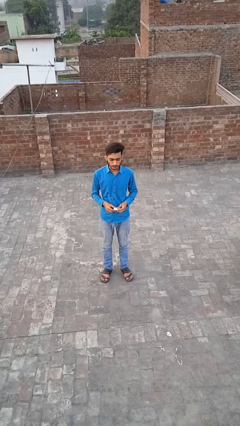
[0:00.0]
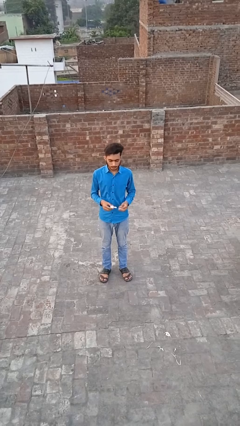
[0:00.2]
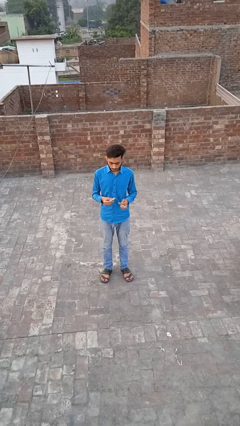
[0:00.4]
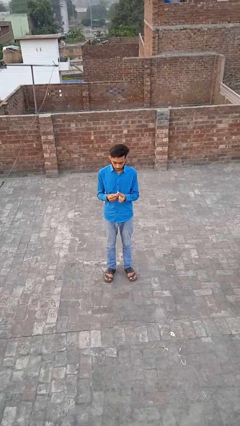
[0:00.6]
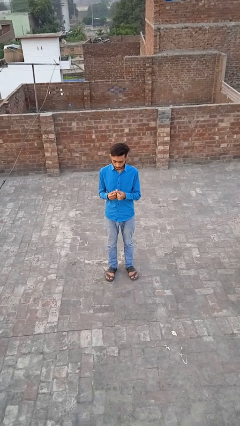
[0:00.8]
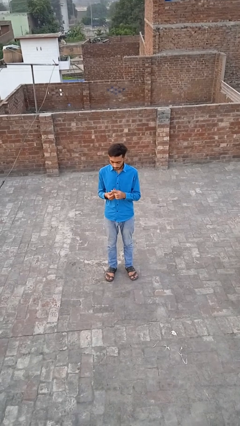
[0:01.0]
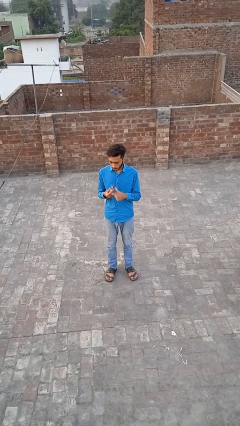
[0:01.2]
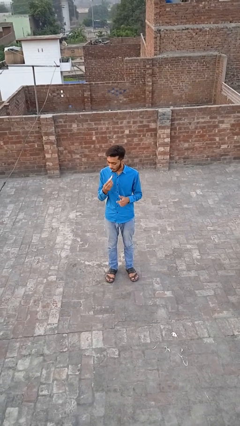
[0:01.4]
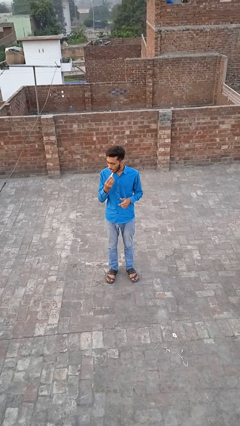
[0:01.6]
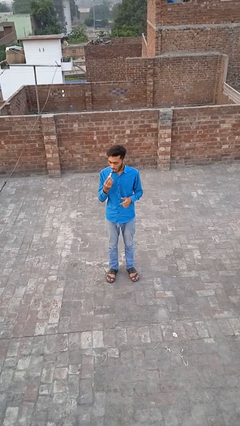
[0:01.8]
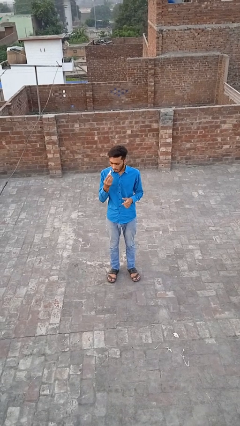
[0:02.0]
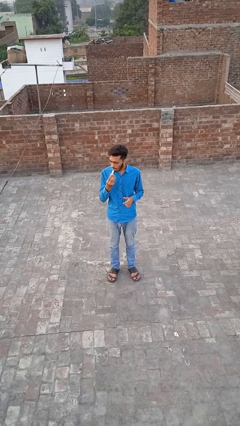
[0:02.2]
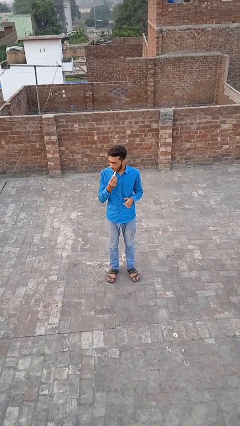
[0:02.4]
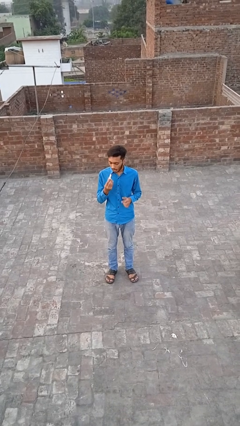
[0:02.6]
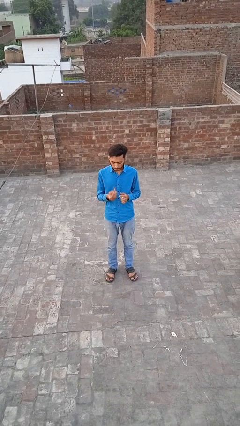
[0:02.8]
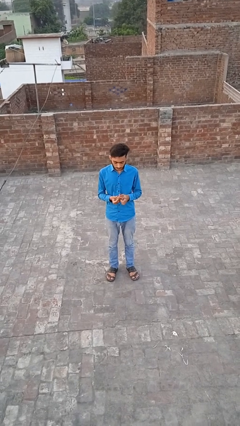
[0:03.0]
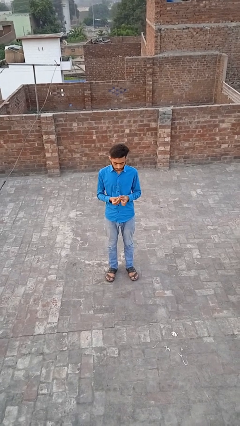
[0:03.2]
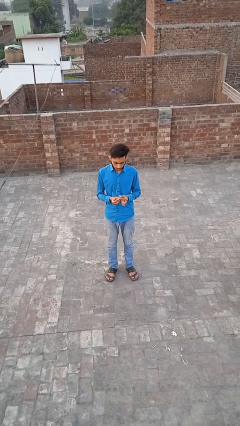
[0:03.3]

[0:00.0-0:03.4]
person applies lip makeup

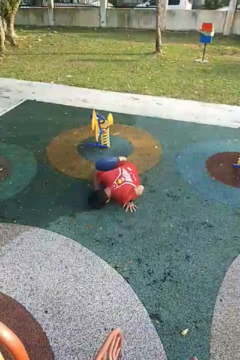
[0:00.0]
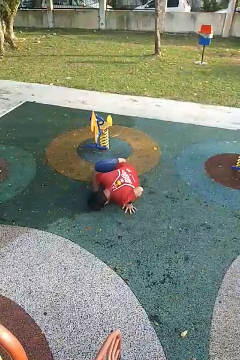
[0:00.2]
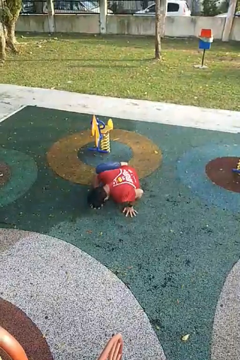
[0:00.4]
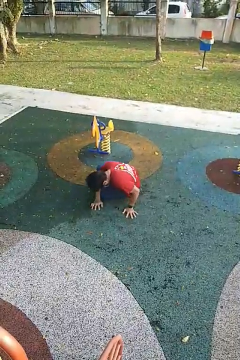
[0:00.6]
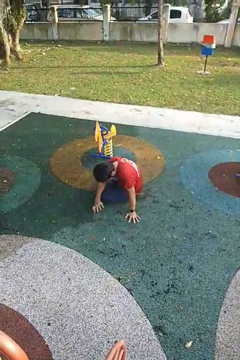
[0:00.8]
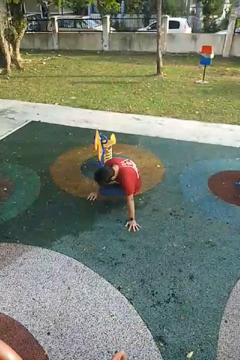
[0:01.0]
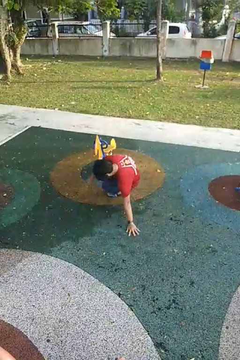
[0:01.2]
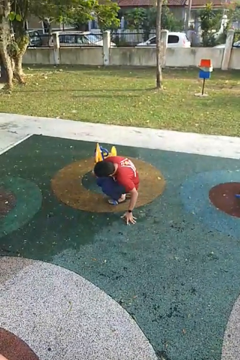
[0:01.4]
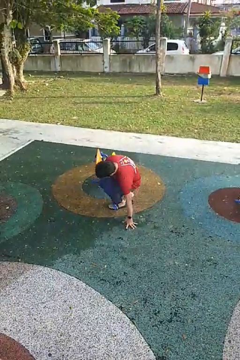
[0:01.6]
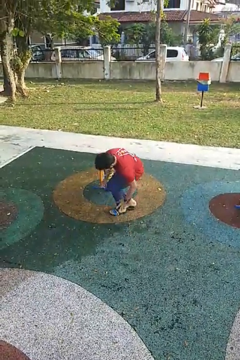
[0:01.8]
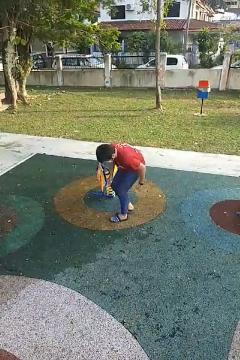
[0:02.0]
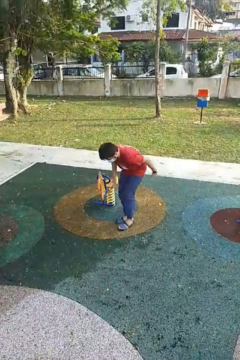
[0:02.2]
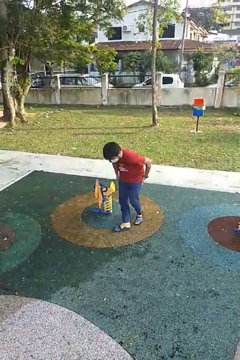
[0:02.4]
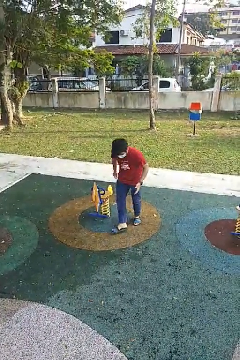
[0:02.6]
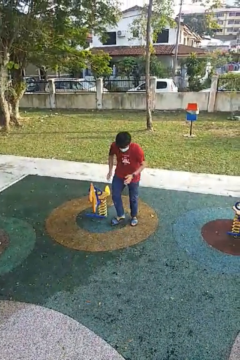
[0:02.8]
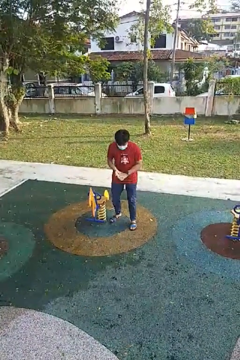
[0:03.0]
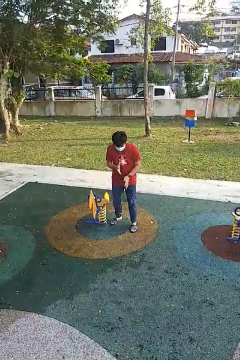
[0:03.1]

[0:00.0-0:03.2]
person stands up from floor

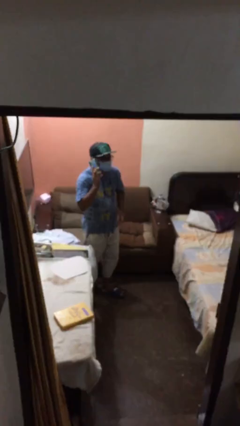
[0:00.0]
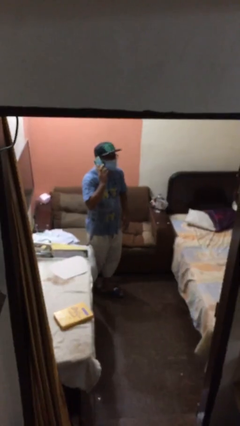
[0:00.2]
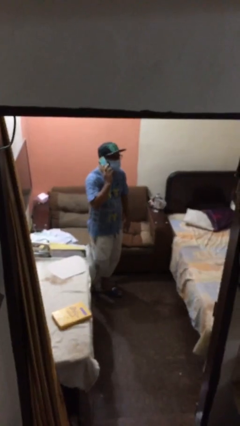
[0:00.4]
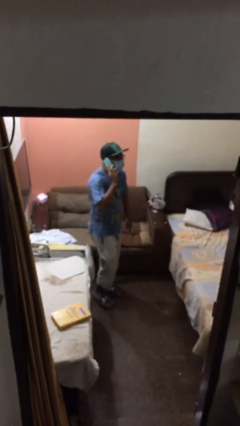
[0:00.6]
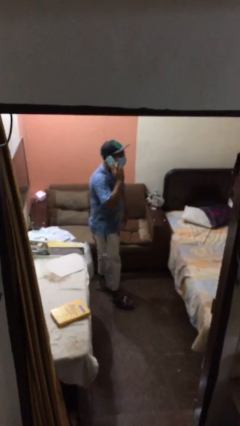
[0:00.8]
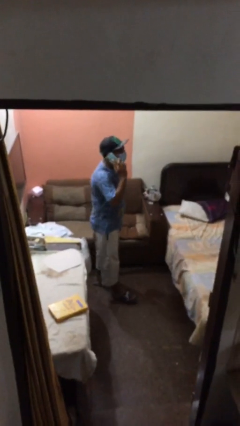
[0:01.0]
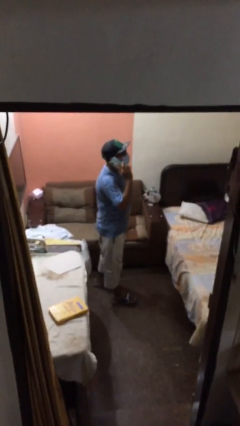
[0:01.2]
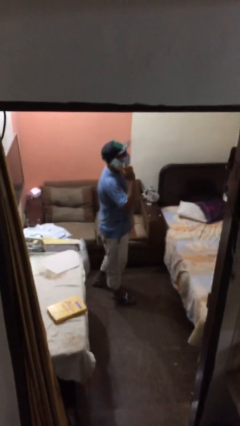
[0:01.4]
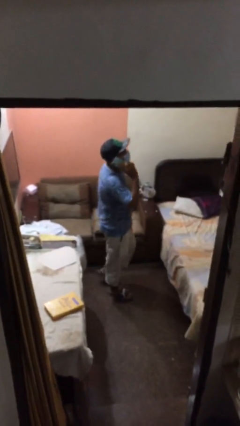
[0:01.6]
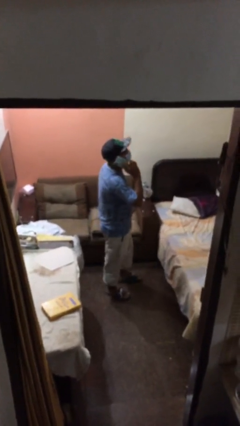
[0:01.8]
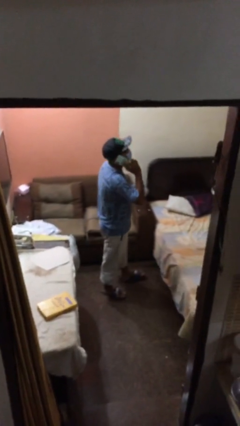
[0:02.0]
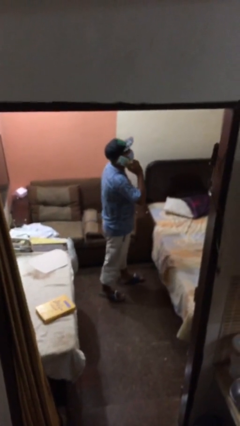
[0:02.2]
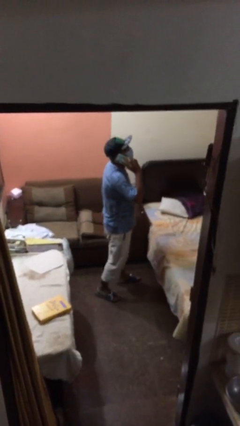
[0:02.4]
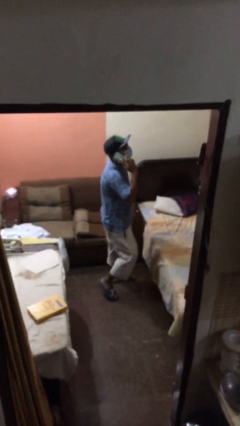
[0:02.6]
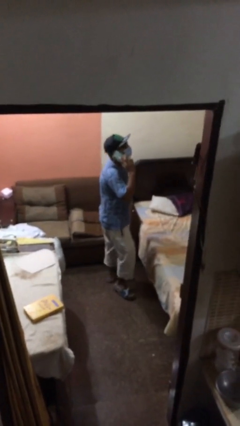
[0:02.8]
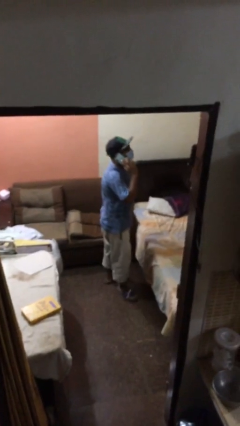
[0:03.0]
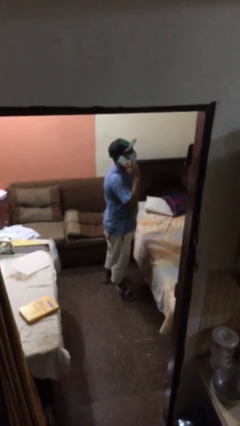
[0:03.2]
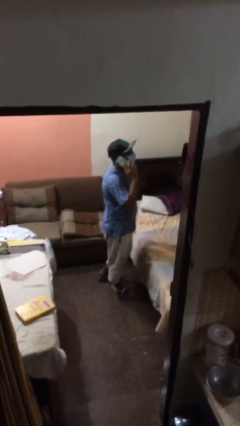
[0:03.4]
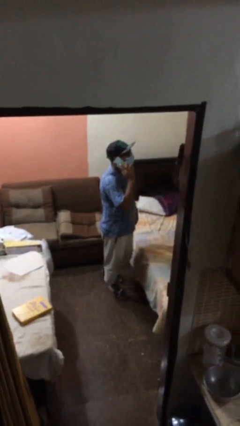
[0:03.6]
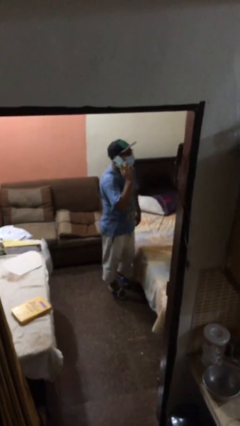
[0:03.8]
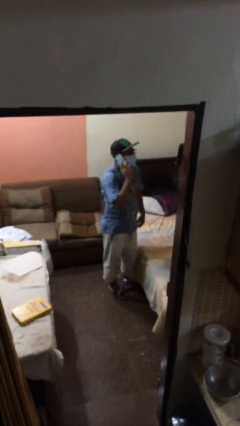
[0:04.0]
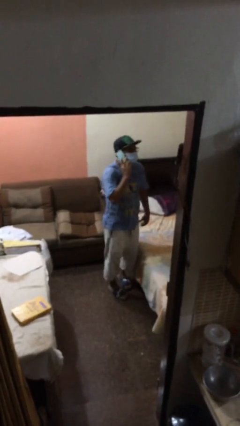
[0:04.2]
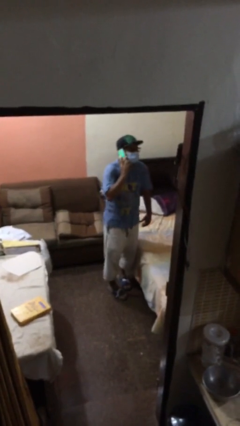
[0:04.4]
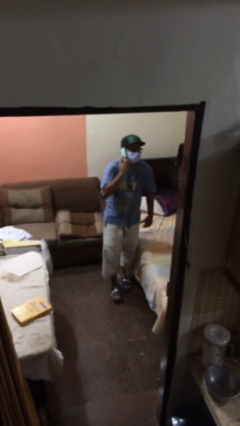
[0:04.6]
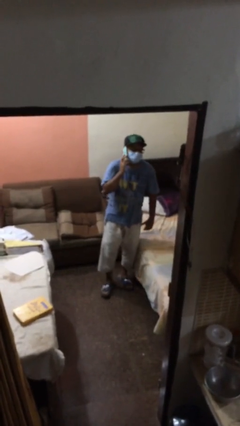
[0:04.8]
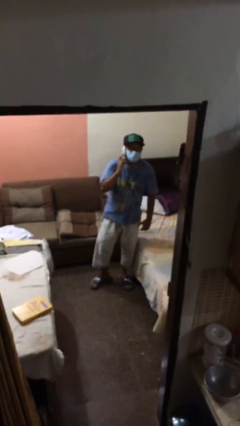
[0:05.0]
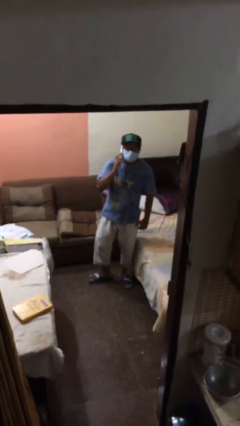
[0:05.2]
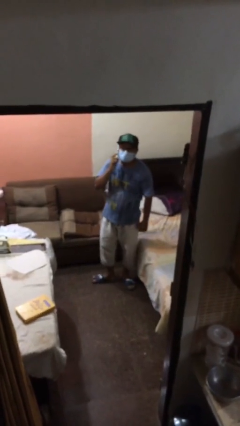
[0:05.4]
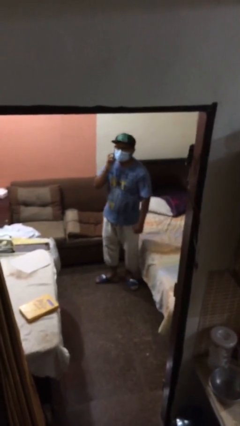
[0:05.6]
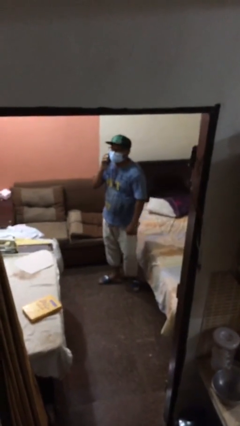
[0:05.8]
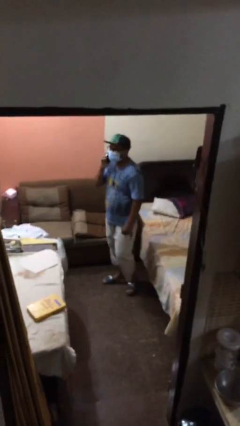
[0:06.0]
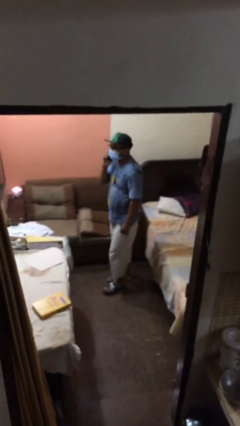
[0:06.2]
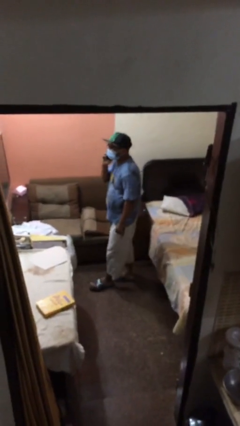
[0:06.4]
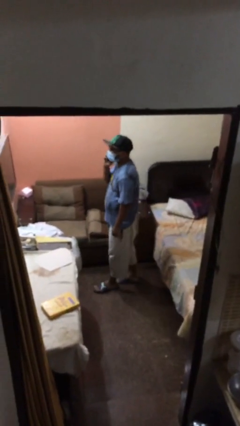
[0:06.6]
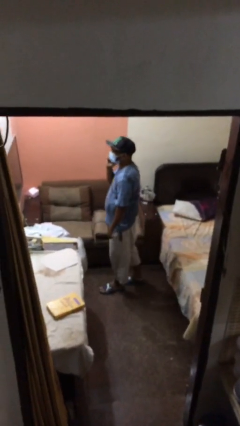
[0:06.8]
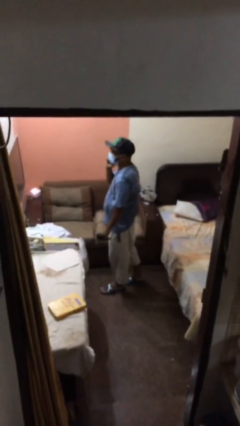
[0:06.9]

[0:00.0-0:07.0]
person talks on phone

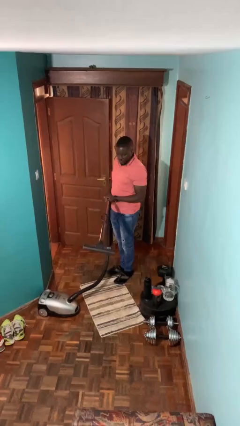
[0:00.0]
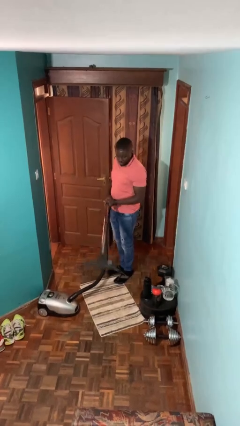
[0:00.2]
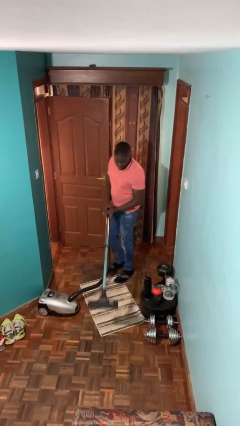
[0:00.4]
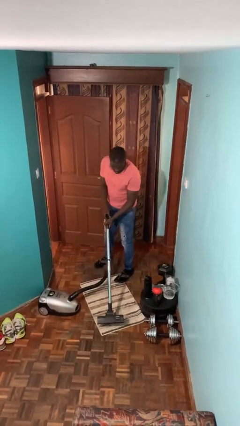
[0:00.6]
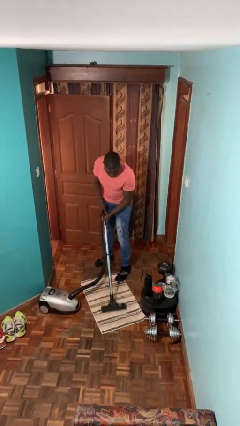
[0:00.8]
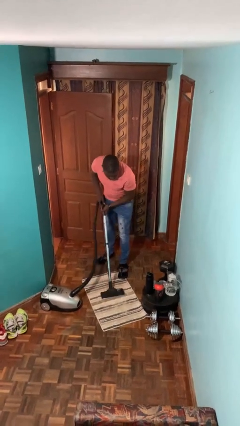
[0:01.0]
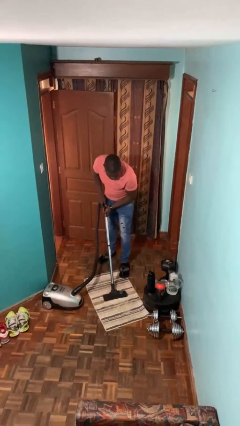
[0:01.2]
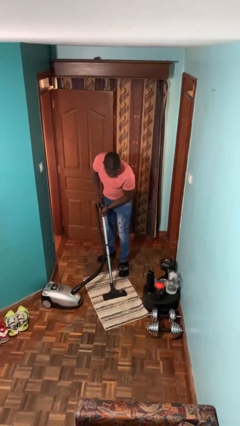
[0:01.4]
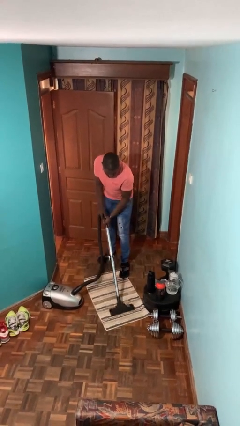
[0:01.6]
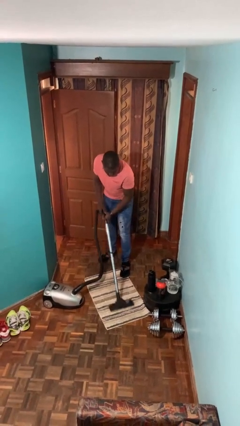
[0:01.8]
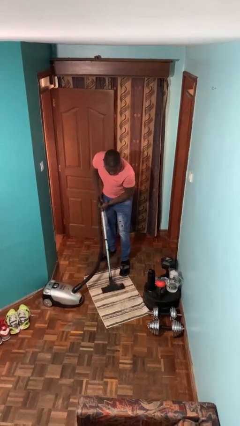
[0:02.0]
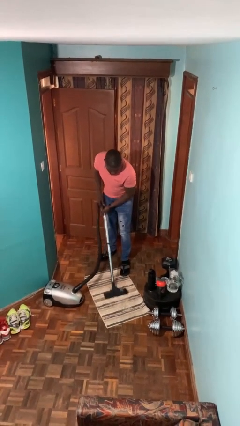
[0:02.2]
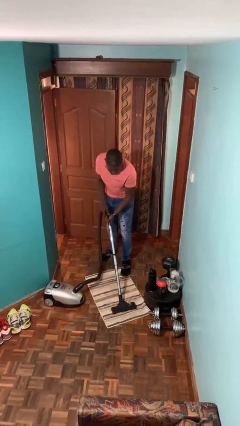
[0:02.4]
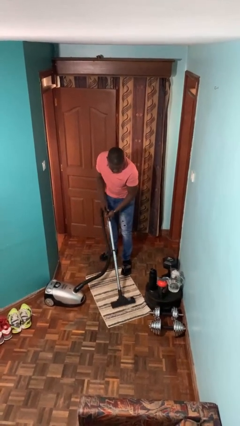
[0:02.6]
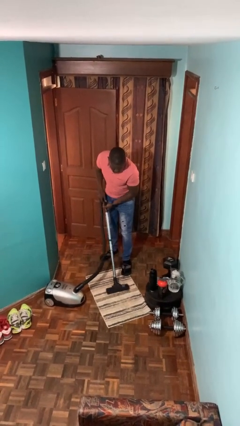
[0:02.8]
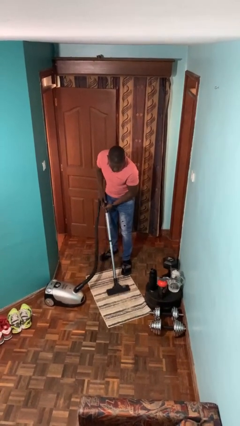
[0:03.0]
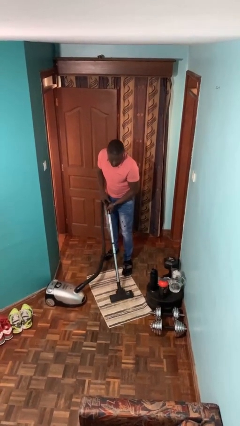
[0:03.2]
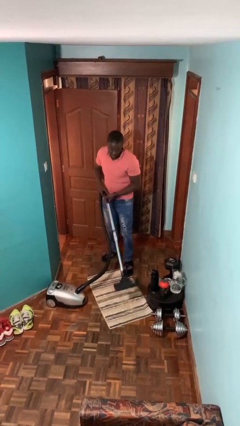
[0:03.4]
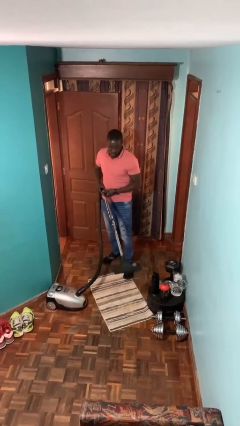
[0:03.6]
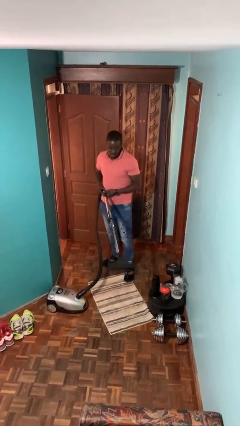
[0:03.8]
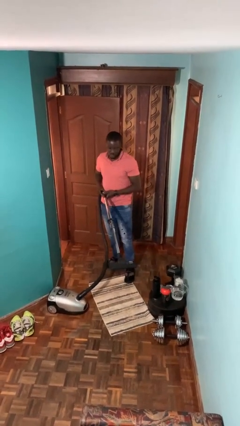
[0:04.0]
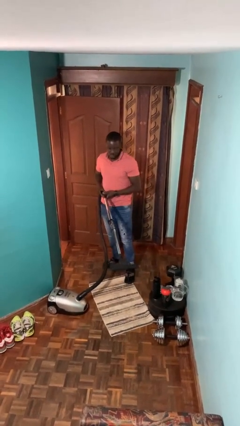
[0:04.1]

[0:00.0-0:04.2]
person vacuums carpet

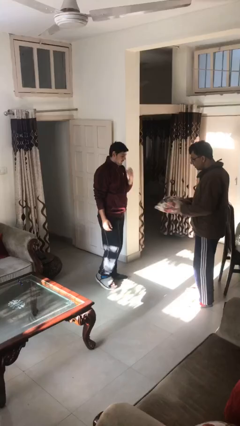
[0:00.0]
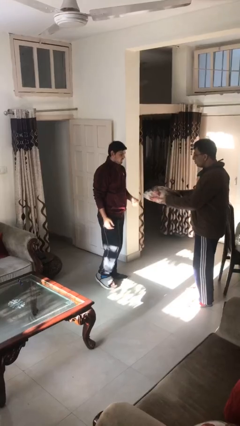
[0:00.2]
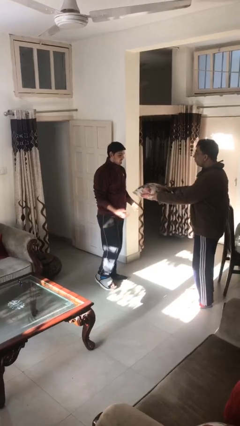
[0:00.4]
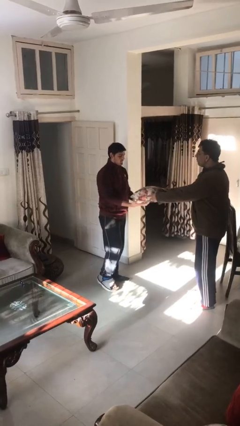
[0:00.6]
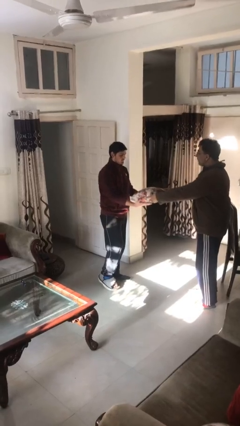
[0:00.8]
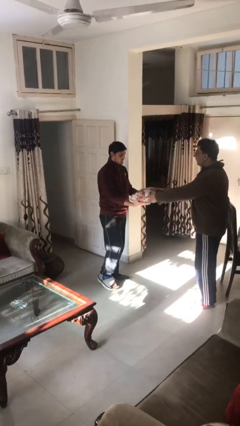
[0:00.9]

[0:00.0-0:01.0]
person transfers object to person
